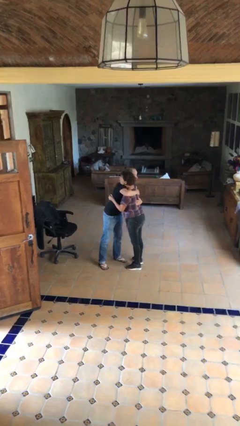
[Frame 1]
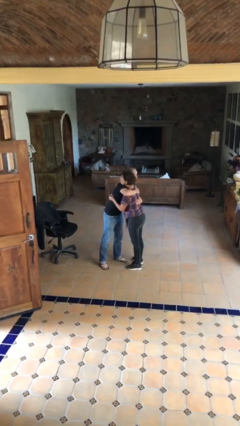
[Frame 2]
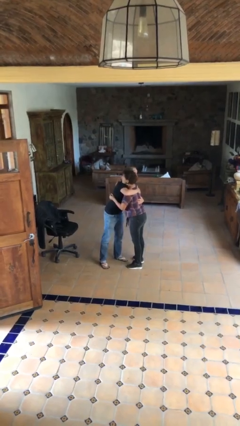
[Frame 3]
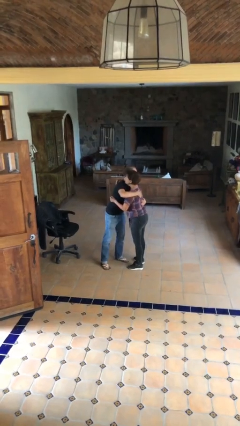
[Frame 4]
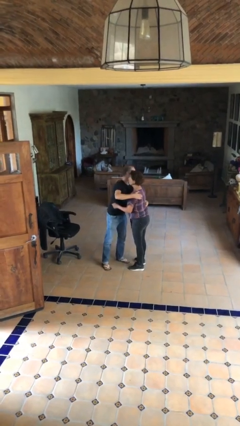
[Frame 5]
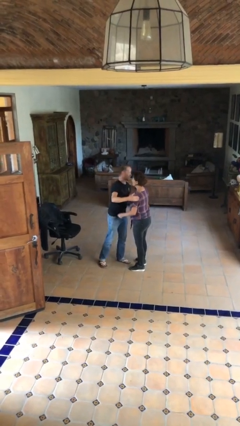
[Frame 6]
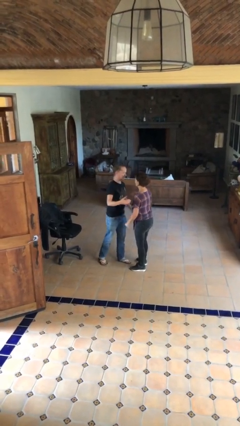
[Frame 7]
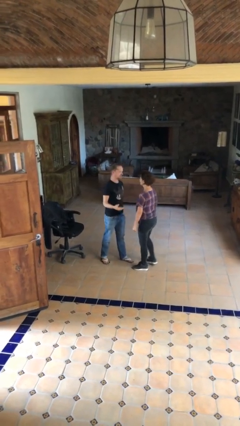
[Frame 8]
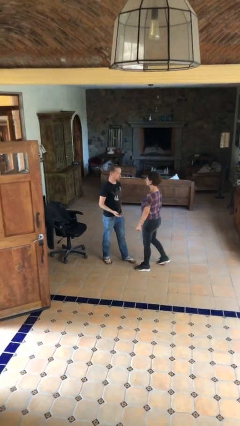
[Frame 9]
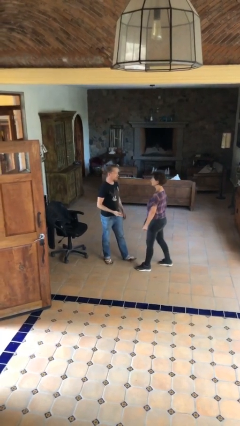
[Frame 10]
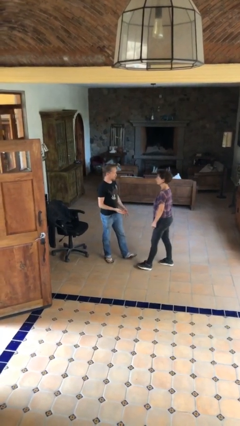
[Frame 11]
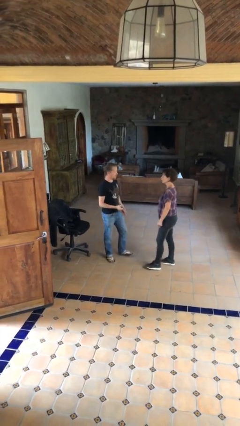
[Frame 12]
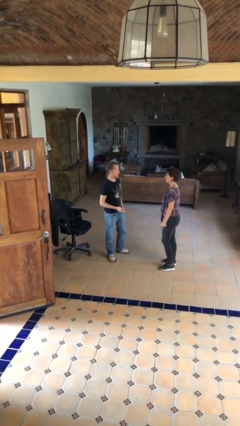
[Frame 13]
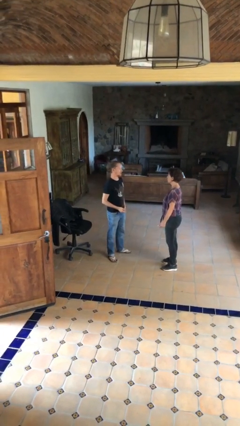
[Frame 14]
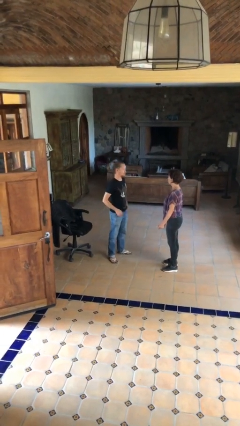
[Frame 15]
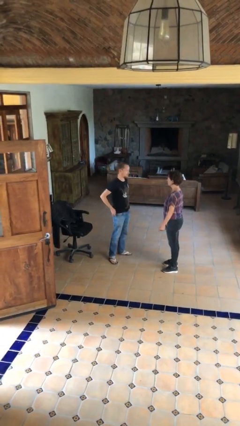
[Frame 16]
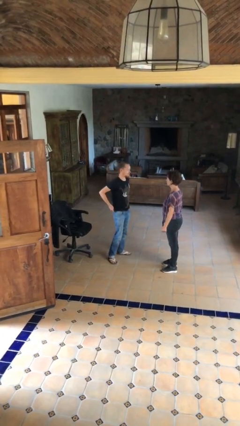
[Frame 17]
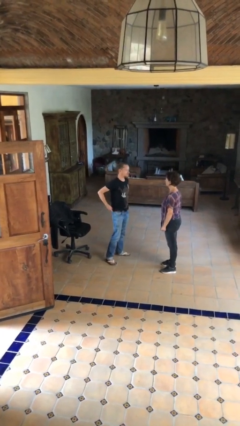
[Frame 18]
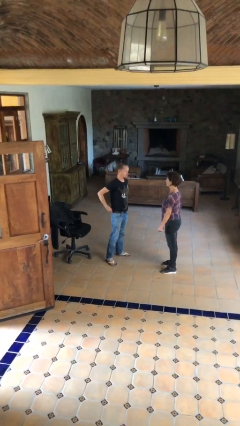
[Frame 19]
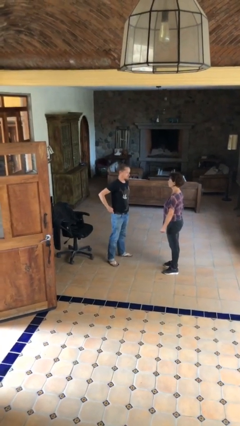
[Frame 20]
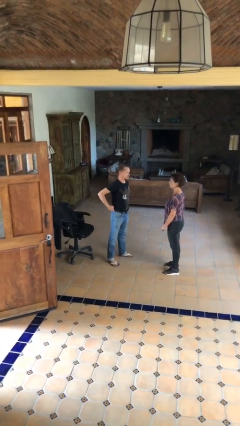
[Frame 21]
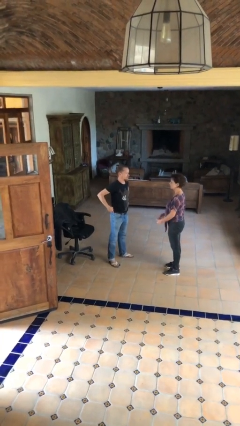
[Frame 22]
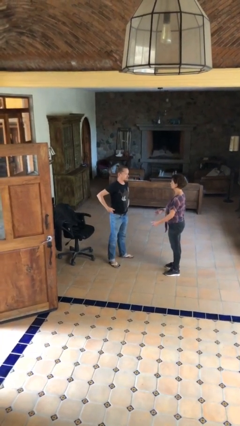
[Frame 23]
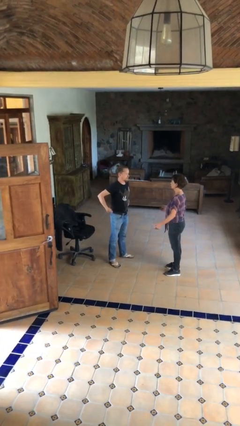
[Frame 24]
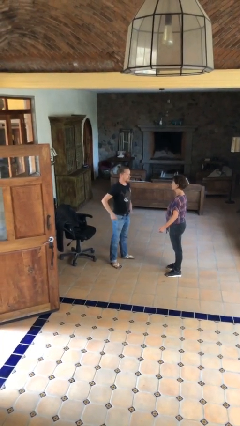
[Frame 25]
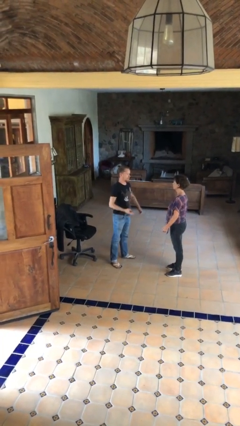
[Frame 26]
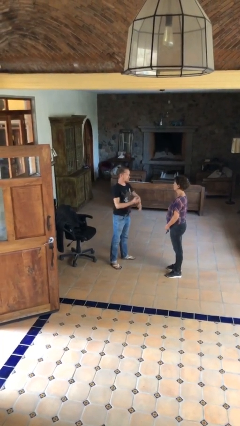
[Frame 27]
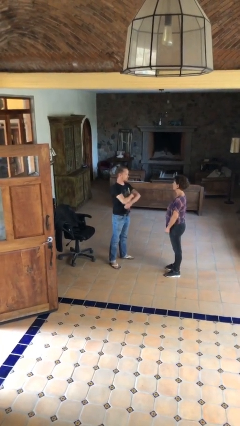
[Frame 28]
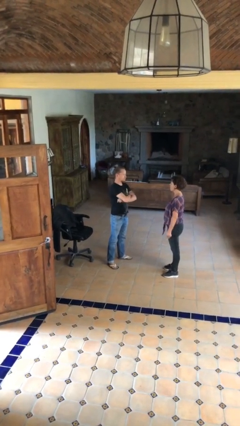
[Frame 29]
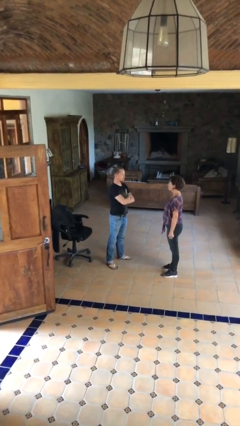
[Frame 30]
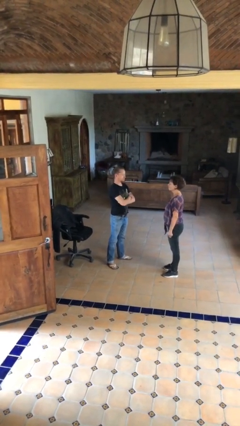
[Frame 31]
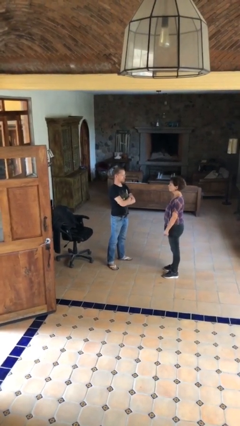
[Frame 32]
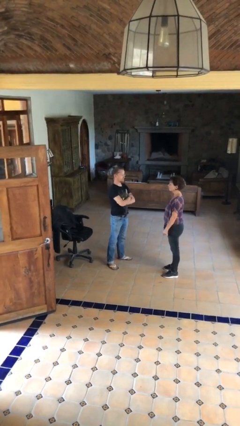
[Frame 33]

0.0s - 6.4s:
person talks to person

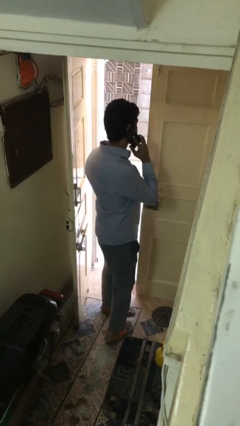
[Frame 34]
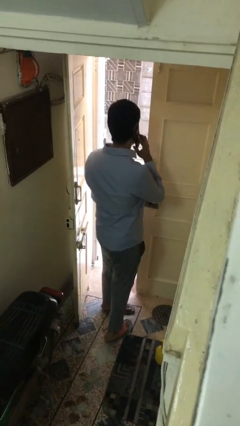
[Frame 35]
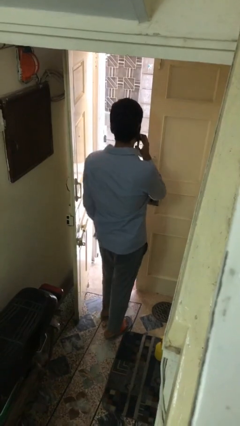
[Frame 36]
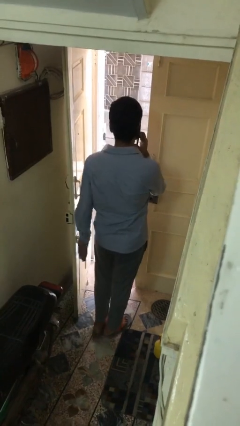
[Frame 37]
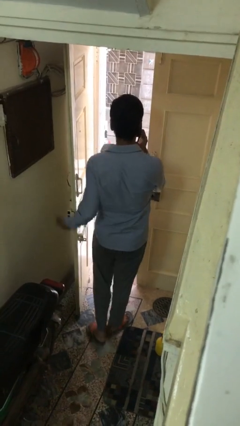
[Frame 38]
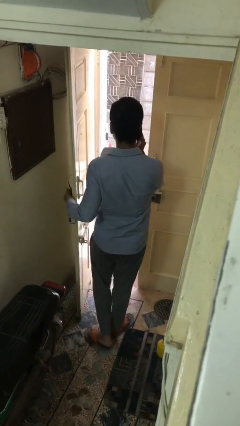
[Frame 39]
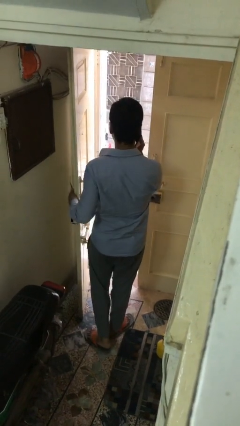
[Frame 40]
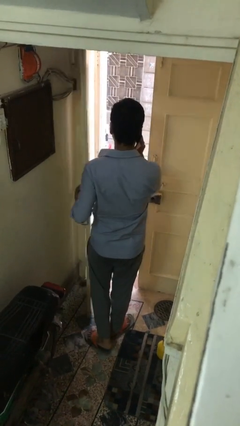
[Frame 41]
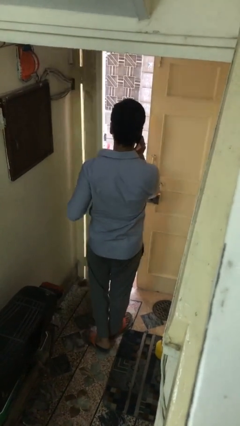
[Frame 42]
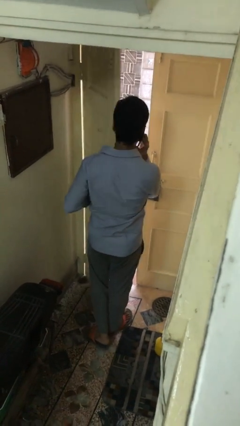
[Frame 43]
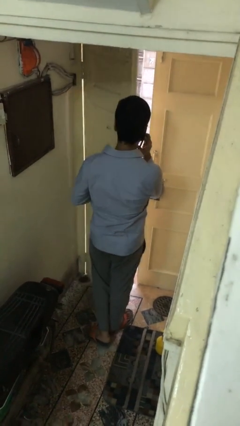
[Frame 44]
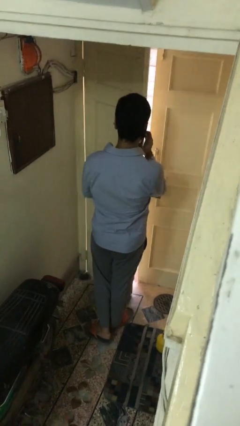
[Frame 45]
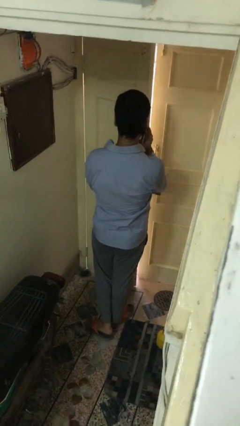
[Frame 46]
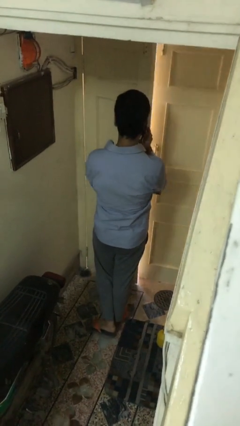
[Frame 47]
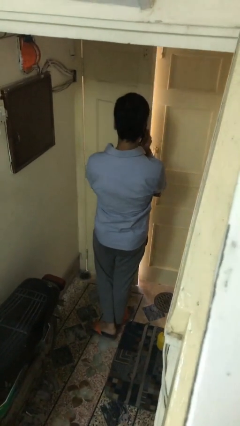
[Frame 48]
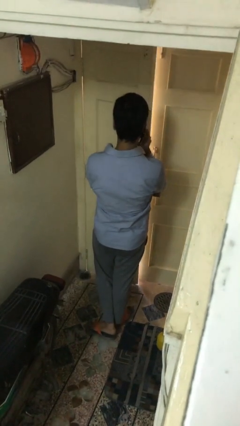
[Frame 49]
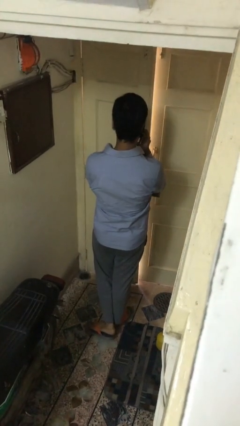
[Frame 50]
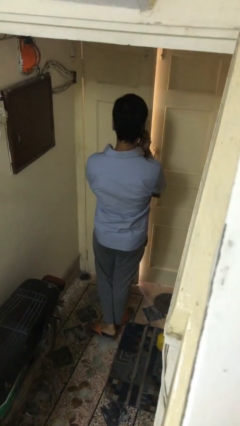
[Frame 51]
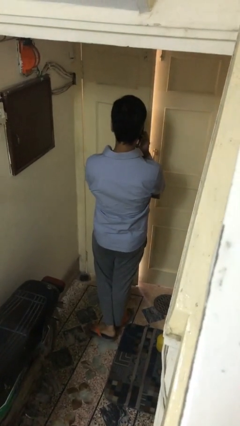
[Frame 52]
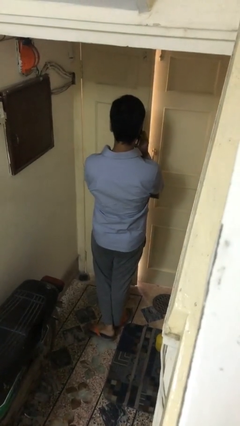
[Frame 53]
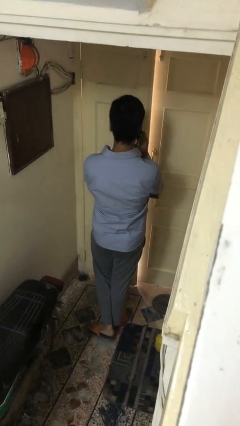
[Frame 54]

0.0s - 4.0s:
person closes facility door

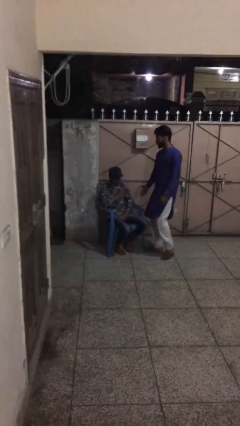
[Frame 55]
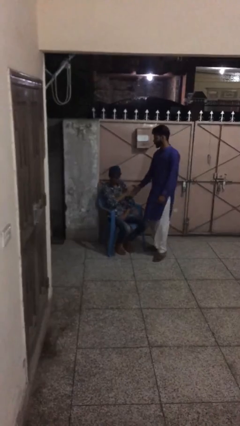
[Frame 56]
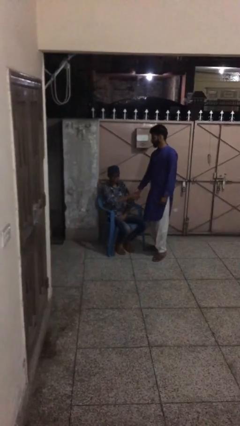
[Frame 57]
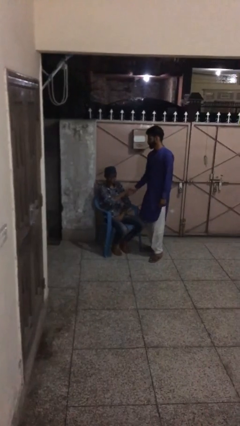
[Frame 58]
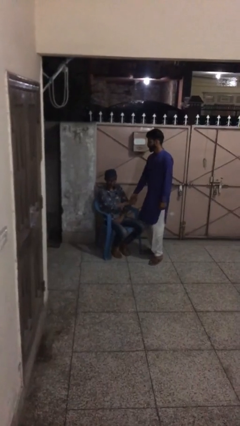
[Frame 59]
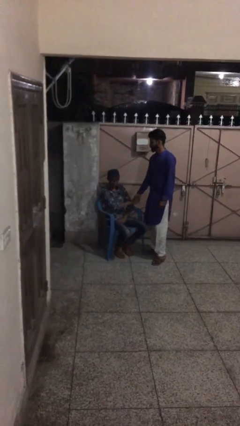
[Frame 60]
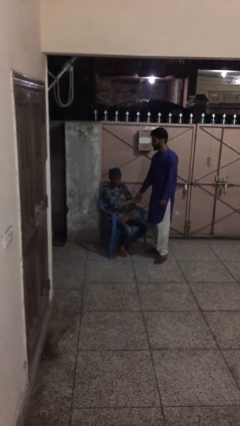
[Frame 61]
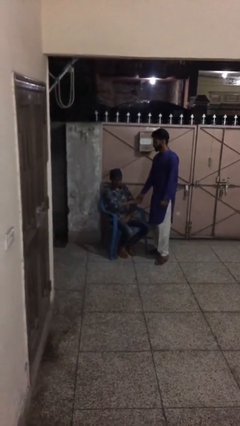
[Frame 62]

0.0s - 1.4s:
person shakes hand

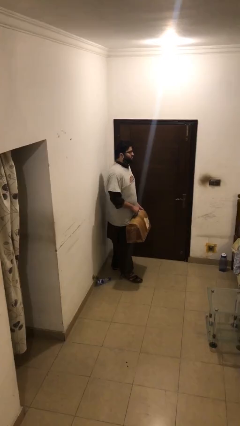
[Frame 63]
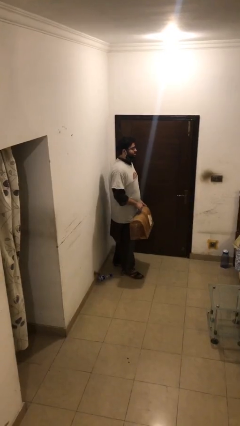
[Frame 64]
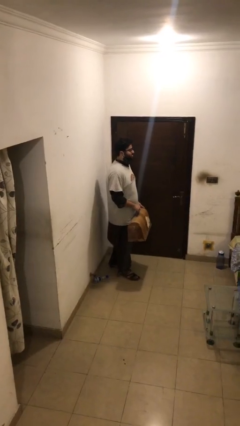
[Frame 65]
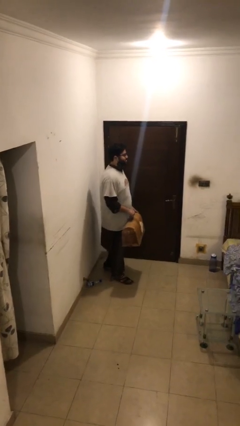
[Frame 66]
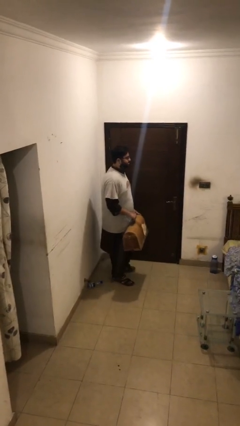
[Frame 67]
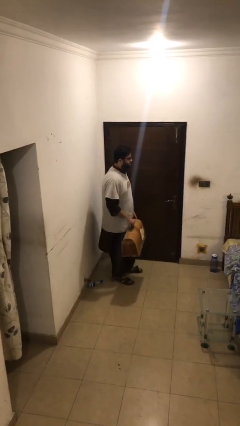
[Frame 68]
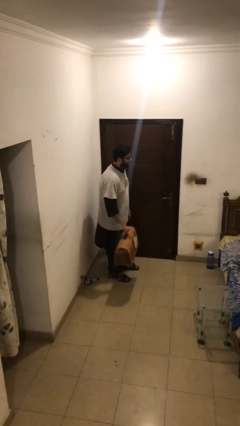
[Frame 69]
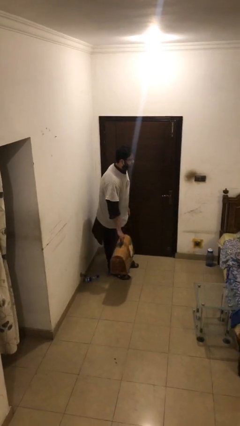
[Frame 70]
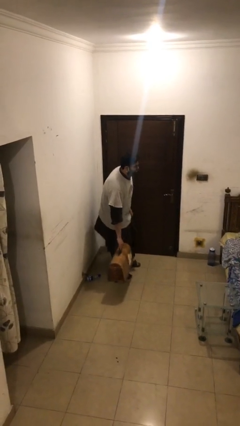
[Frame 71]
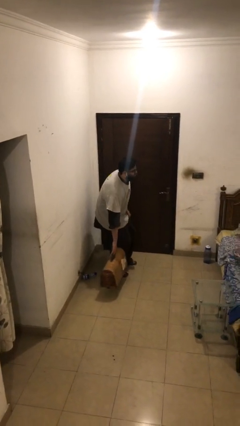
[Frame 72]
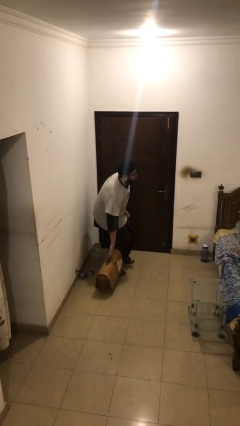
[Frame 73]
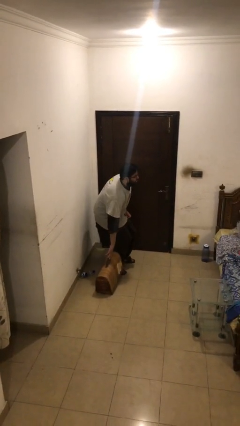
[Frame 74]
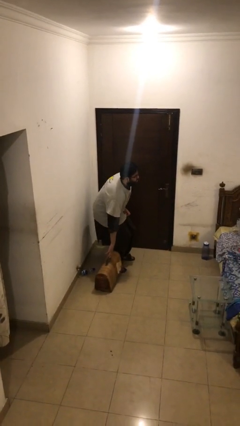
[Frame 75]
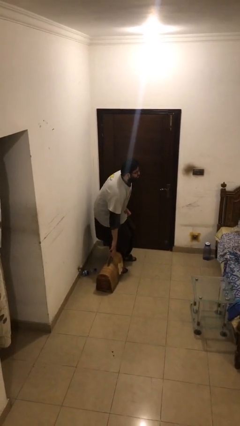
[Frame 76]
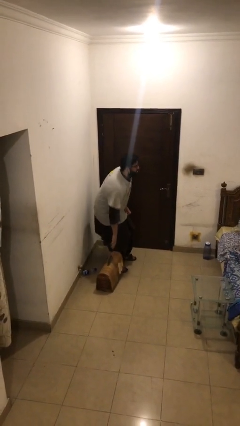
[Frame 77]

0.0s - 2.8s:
person puts down object on floor

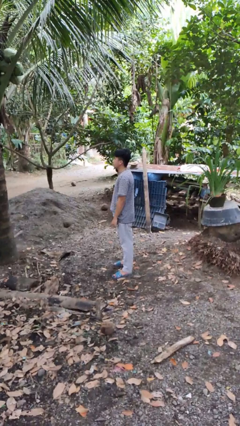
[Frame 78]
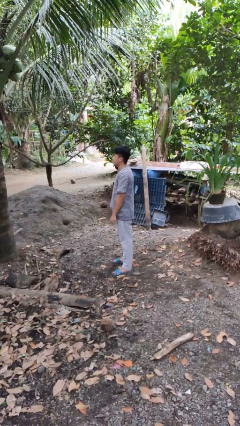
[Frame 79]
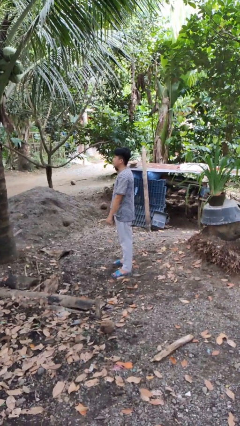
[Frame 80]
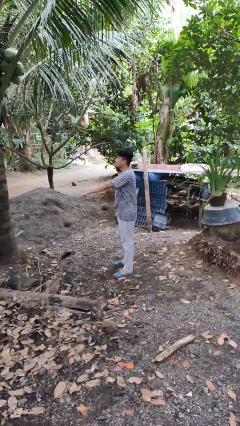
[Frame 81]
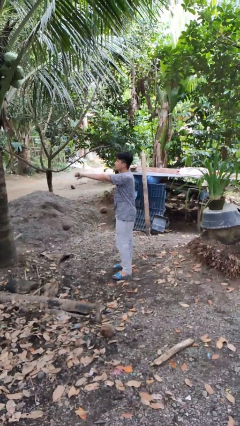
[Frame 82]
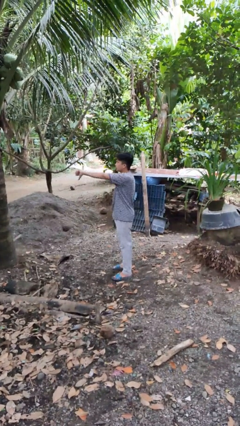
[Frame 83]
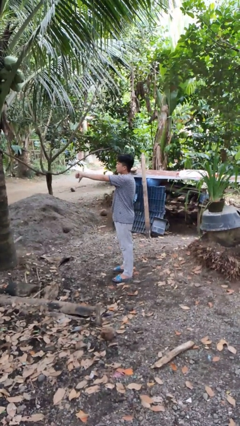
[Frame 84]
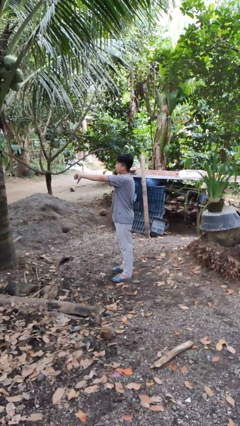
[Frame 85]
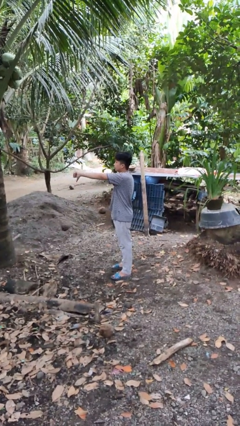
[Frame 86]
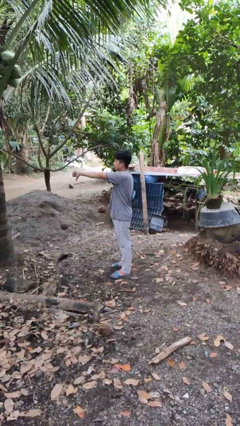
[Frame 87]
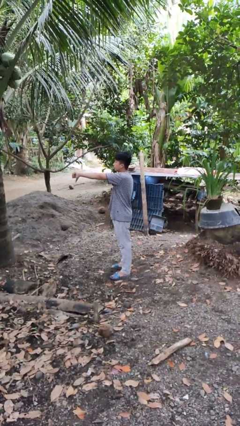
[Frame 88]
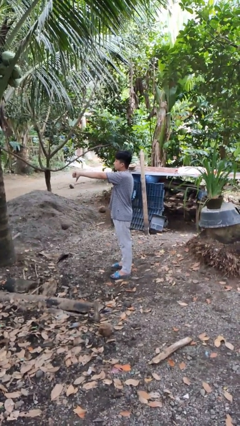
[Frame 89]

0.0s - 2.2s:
person gestures thumbs down

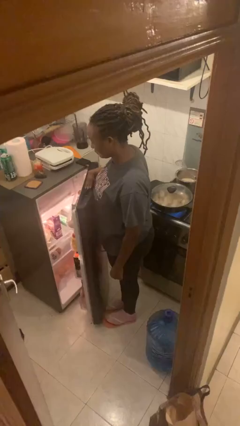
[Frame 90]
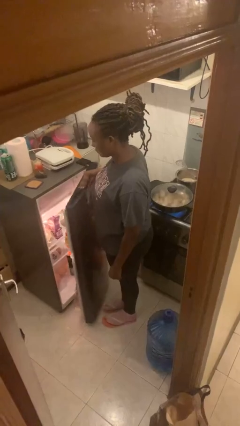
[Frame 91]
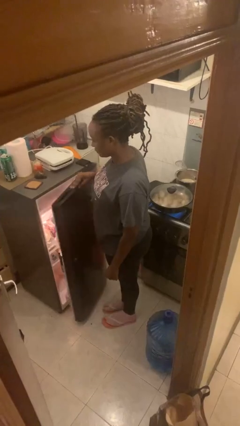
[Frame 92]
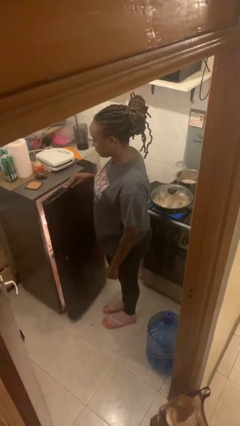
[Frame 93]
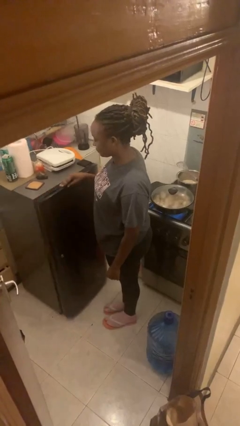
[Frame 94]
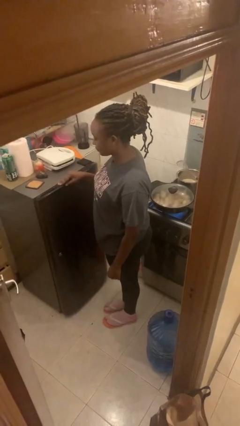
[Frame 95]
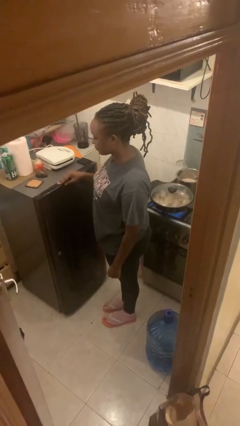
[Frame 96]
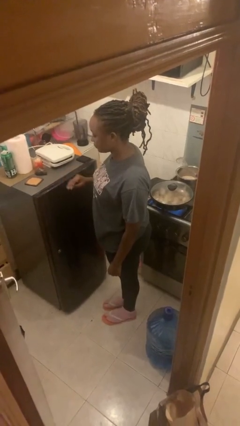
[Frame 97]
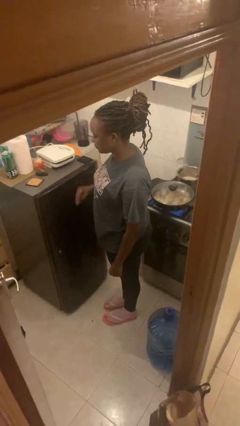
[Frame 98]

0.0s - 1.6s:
person closes refrigerator
